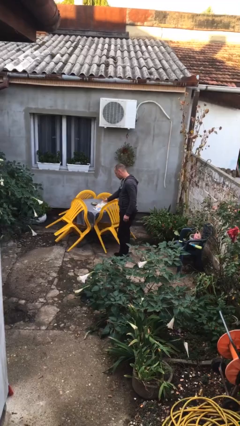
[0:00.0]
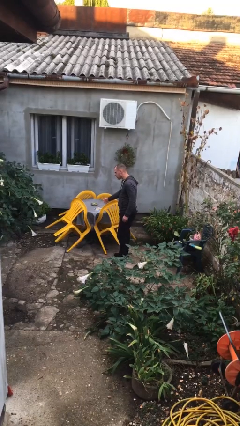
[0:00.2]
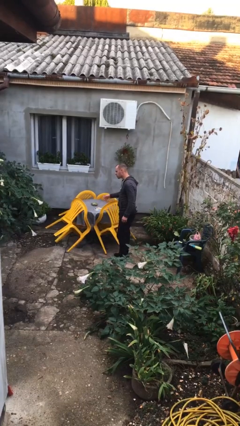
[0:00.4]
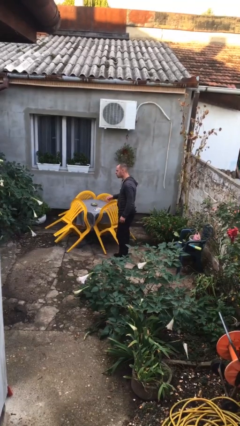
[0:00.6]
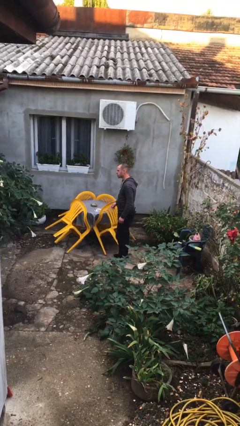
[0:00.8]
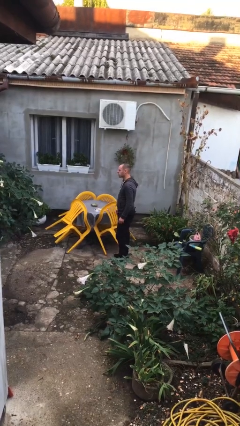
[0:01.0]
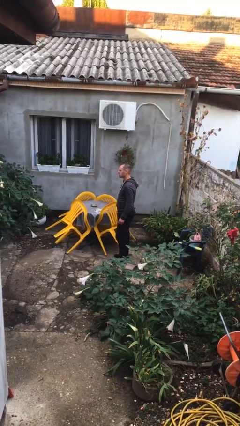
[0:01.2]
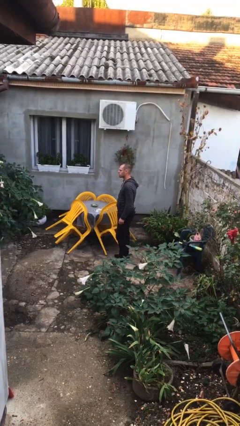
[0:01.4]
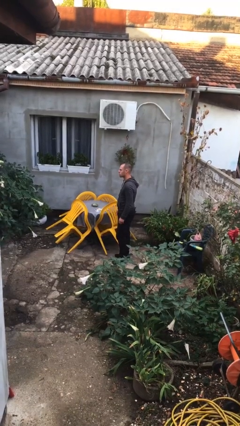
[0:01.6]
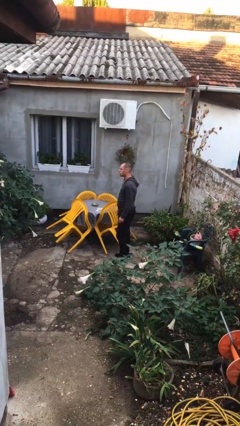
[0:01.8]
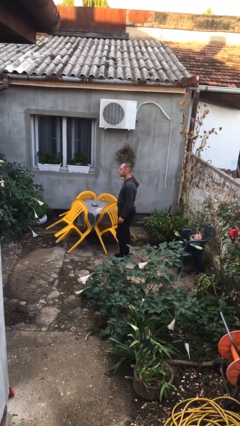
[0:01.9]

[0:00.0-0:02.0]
person puts down object on table

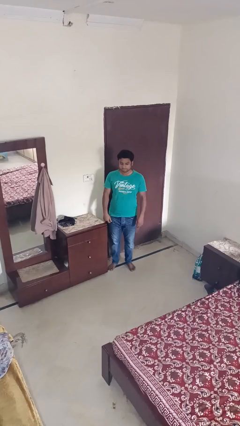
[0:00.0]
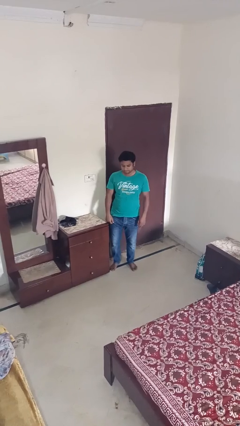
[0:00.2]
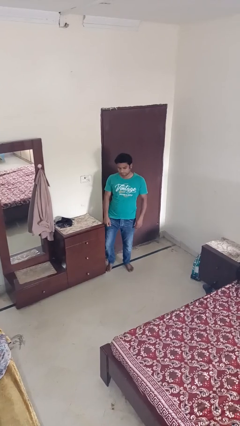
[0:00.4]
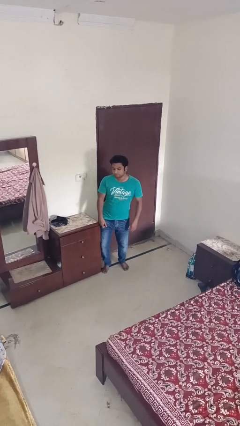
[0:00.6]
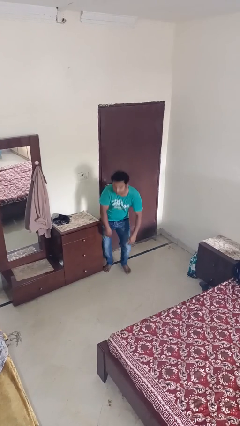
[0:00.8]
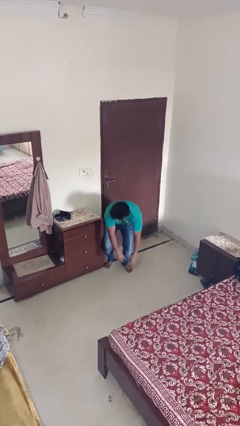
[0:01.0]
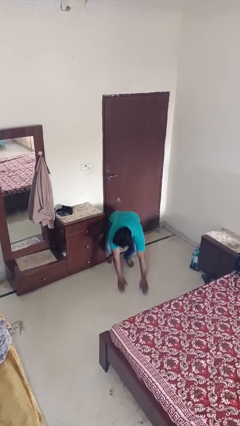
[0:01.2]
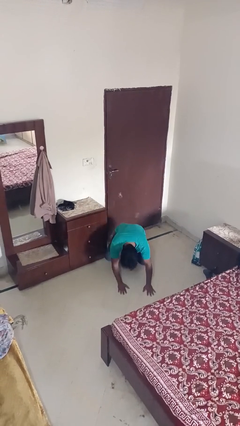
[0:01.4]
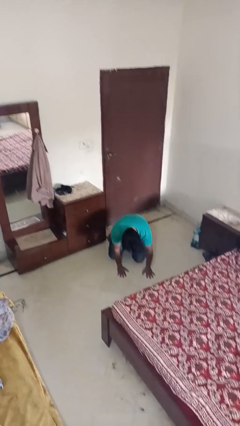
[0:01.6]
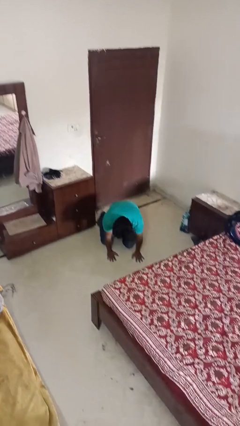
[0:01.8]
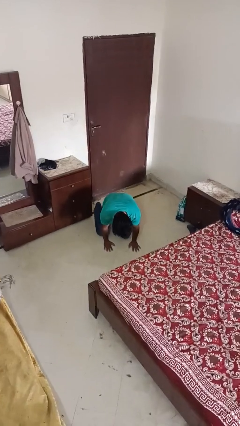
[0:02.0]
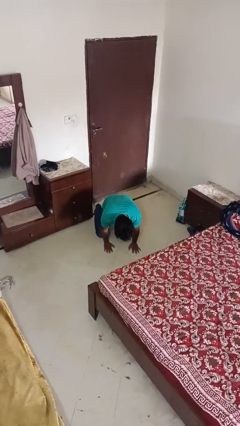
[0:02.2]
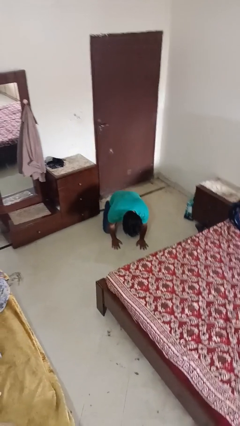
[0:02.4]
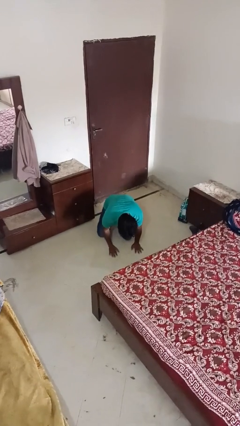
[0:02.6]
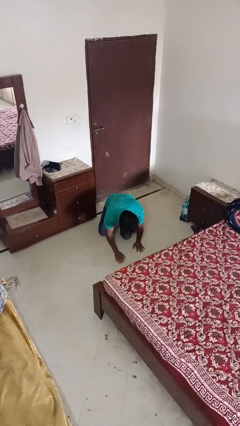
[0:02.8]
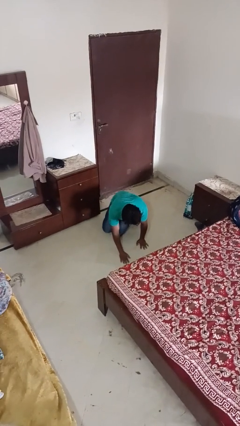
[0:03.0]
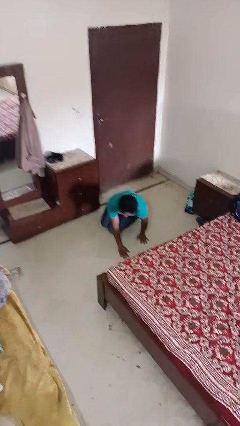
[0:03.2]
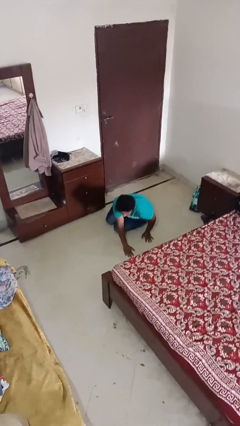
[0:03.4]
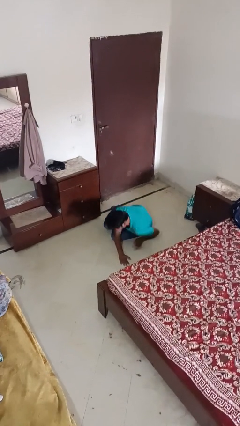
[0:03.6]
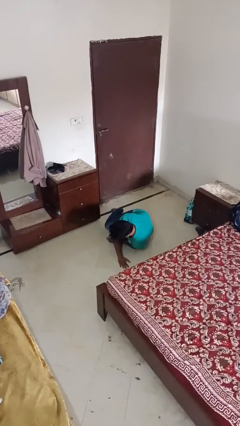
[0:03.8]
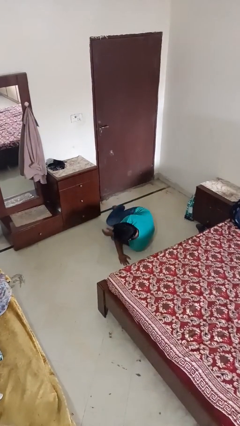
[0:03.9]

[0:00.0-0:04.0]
person trips on object on floor

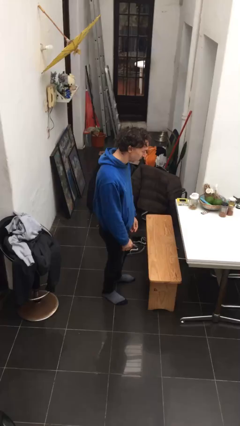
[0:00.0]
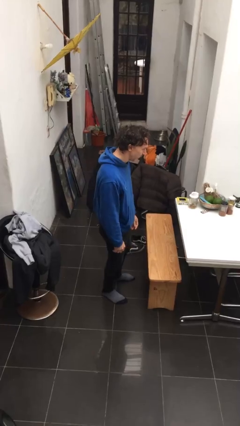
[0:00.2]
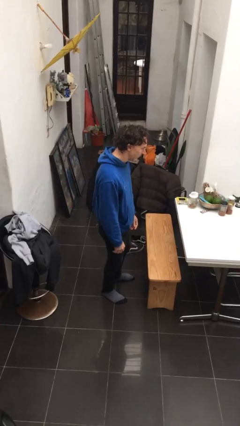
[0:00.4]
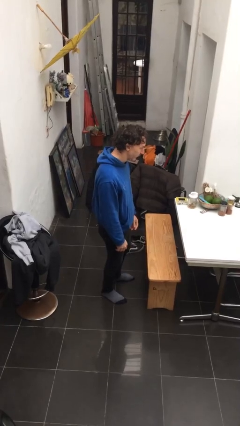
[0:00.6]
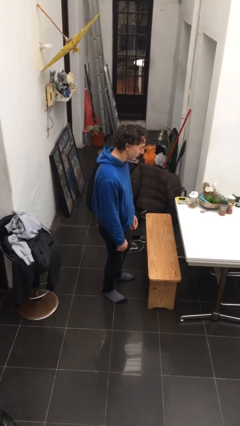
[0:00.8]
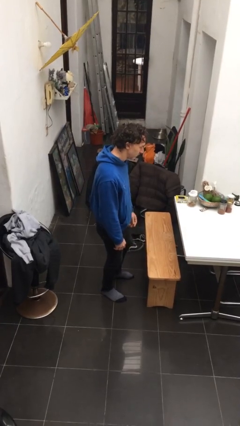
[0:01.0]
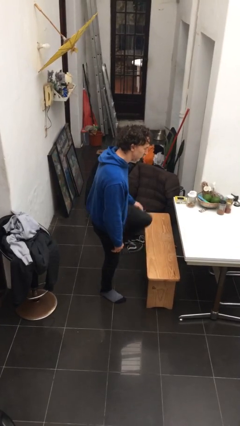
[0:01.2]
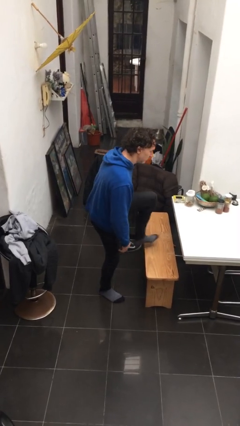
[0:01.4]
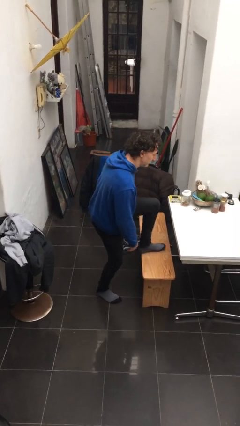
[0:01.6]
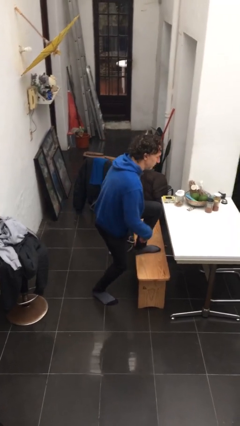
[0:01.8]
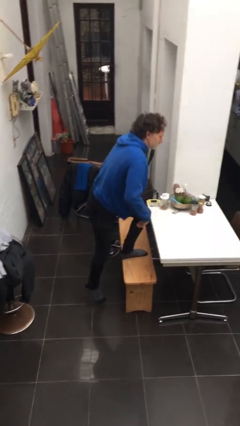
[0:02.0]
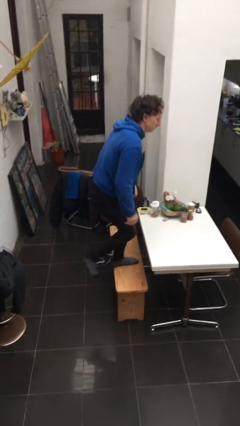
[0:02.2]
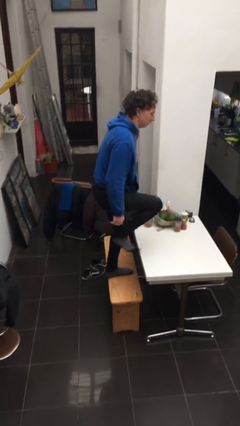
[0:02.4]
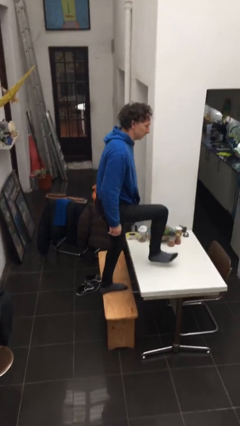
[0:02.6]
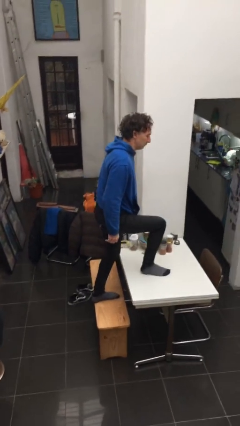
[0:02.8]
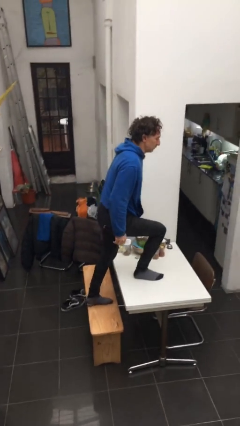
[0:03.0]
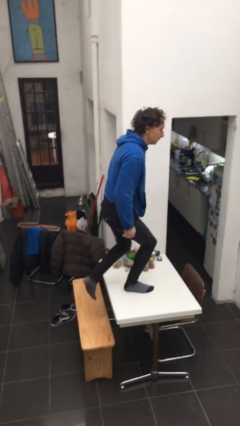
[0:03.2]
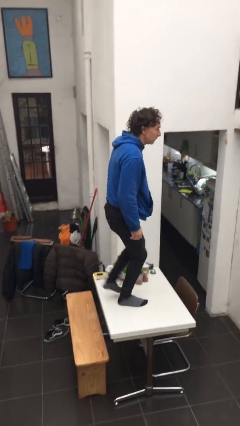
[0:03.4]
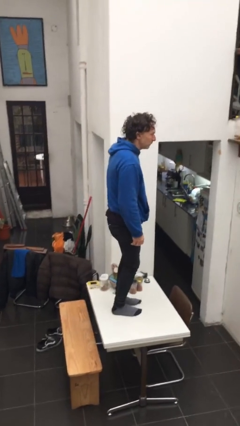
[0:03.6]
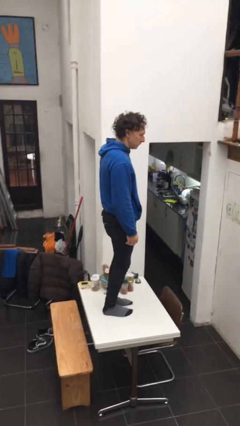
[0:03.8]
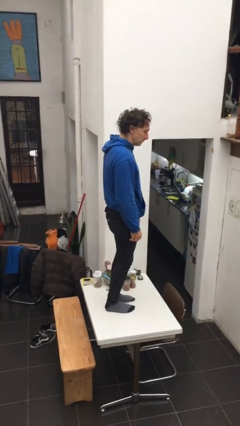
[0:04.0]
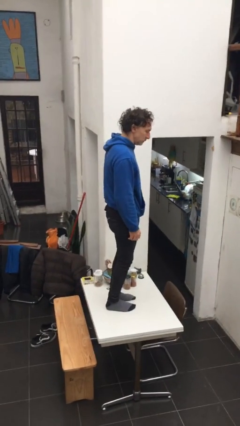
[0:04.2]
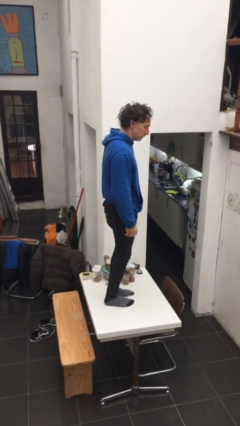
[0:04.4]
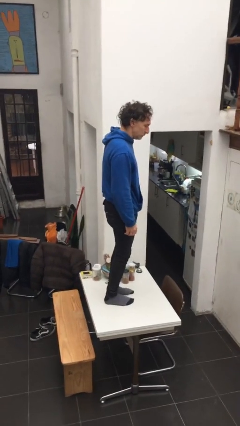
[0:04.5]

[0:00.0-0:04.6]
person climbs on table

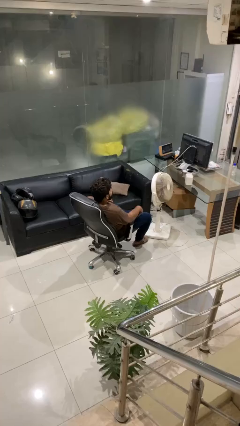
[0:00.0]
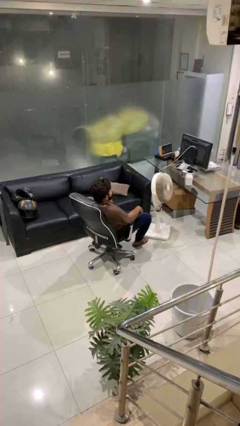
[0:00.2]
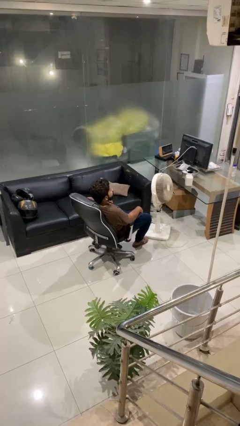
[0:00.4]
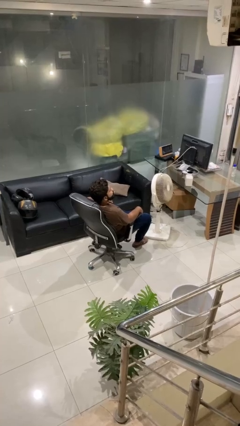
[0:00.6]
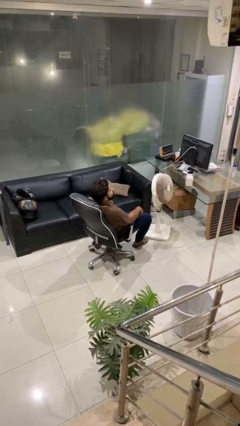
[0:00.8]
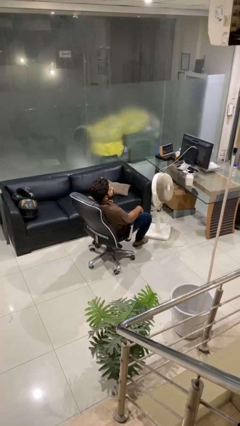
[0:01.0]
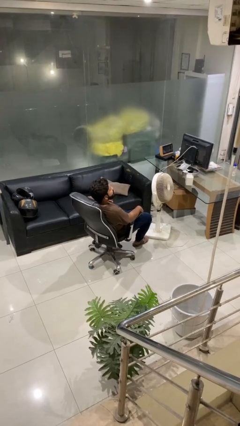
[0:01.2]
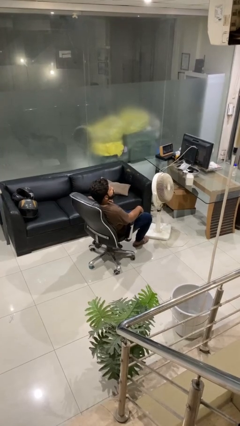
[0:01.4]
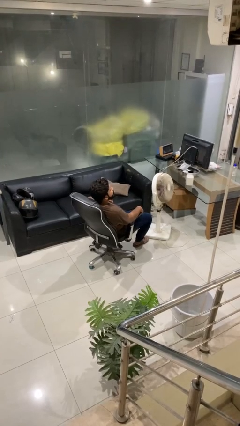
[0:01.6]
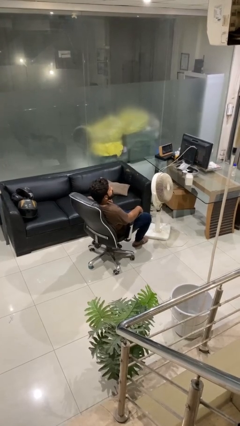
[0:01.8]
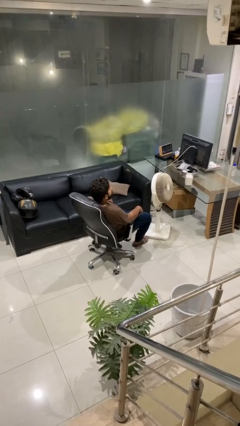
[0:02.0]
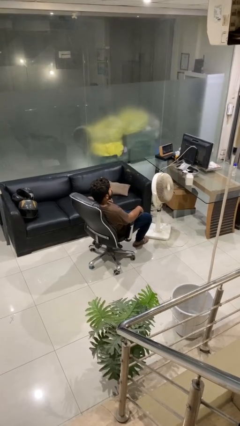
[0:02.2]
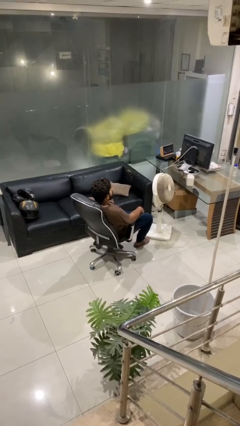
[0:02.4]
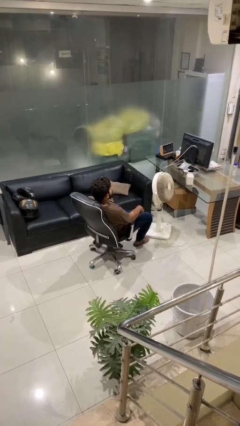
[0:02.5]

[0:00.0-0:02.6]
person sticks out tongue

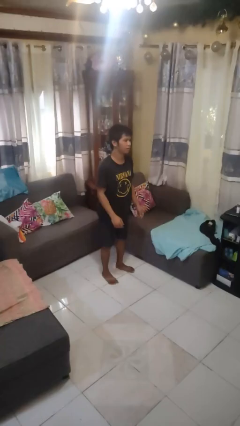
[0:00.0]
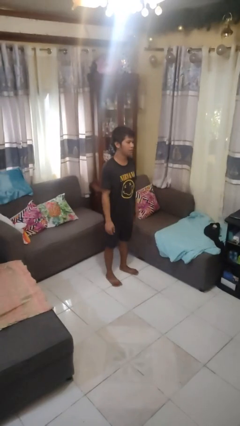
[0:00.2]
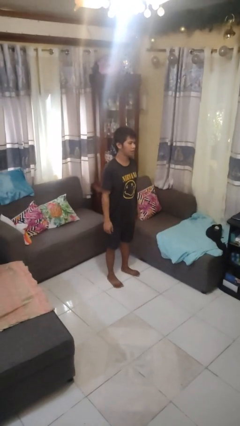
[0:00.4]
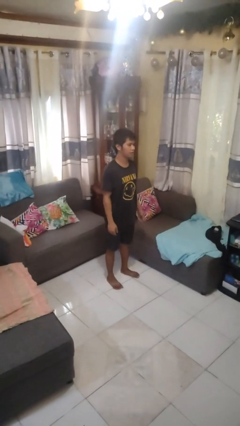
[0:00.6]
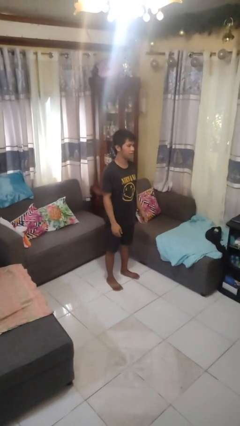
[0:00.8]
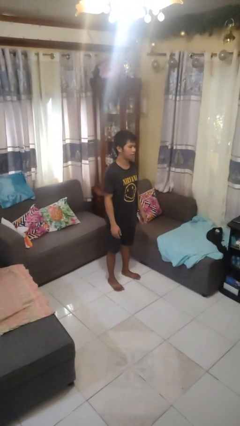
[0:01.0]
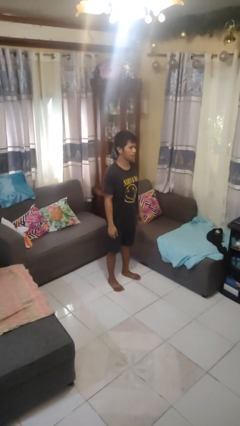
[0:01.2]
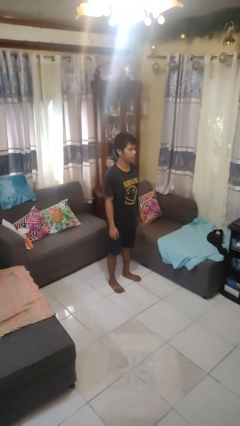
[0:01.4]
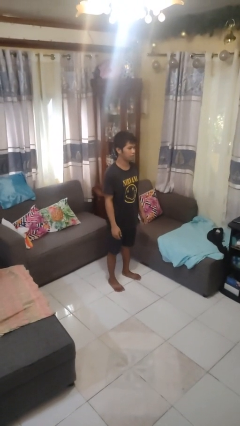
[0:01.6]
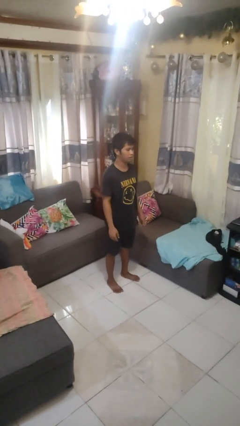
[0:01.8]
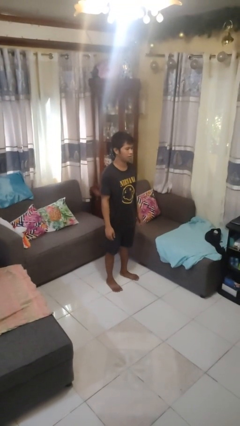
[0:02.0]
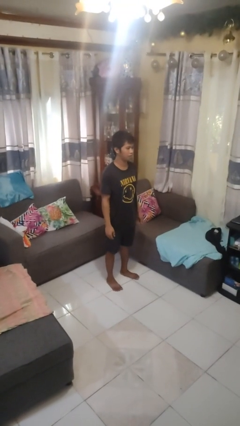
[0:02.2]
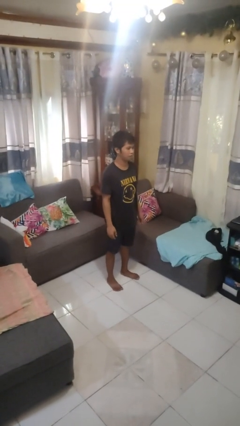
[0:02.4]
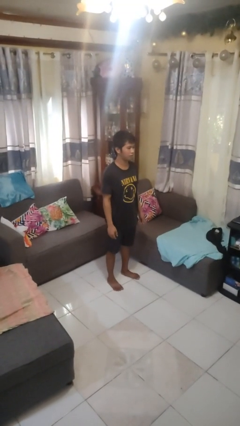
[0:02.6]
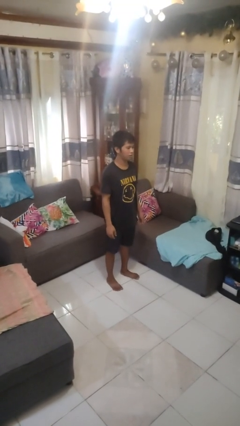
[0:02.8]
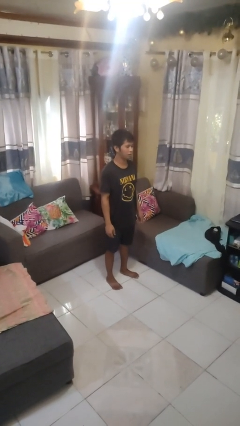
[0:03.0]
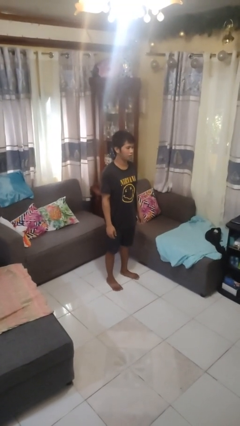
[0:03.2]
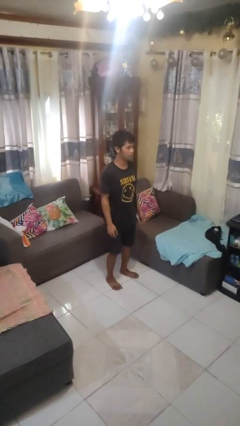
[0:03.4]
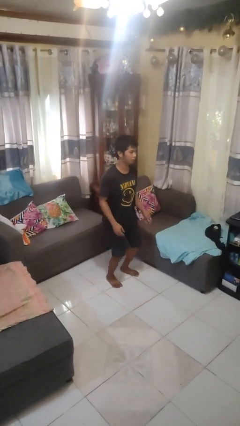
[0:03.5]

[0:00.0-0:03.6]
person stands up

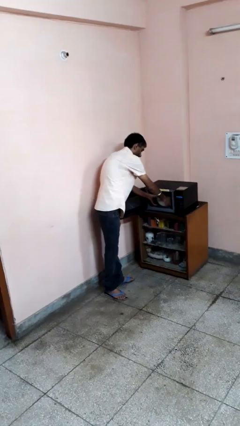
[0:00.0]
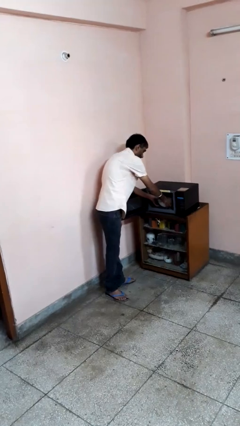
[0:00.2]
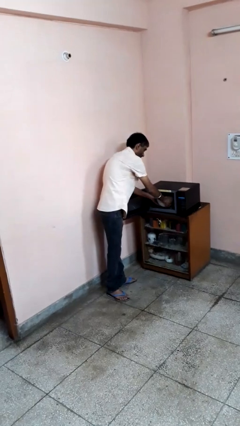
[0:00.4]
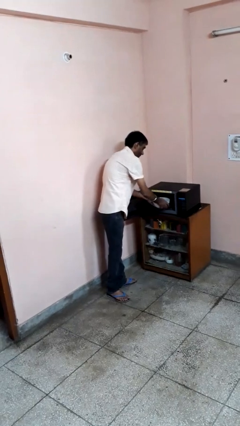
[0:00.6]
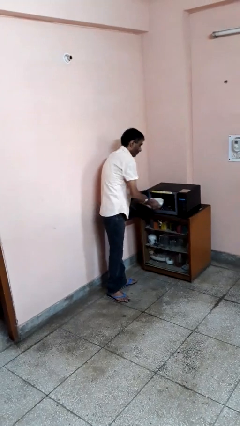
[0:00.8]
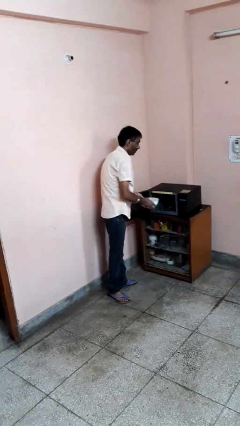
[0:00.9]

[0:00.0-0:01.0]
person takes object from microwave
